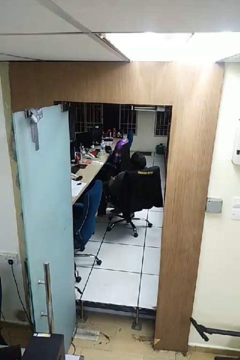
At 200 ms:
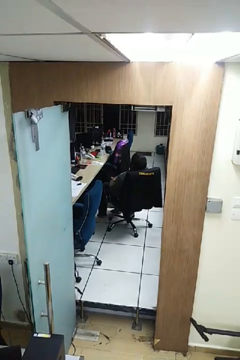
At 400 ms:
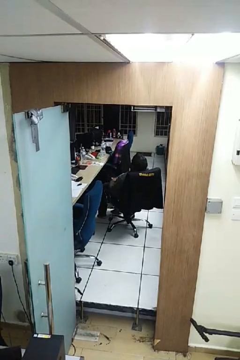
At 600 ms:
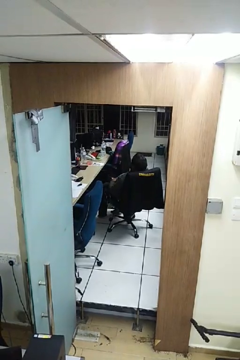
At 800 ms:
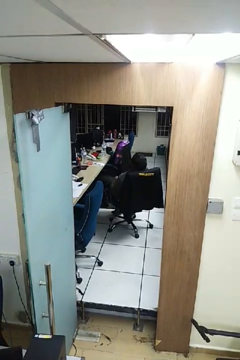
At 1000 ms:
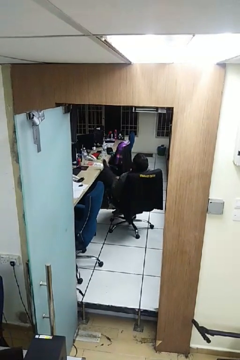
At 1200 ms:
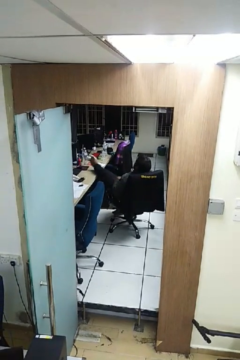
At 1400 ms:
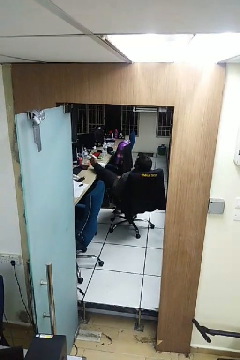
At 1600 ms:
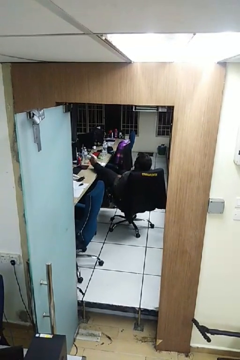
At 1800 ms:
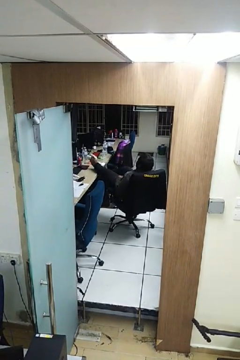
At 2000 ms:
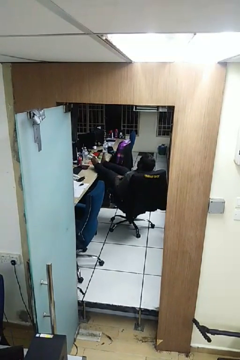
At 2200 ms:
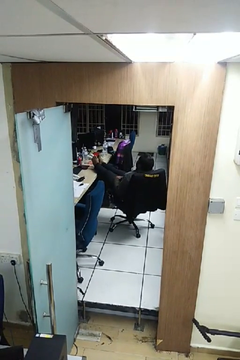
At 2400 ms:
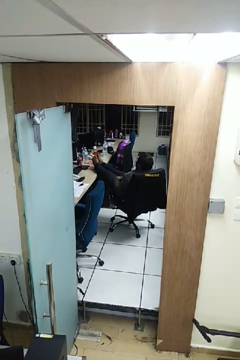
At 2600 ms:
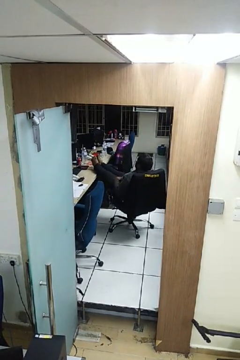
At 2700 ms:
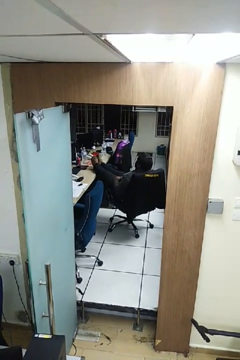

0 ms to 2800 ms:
person puts feet up

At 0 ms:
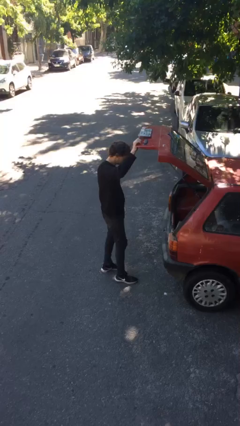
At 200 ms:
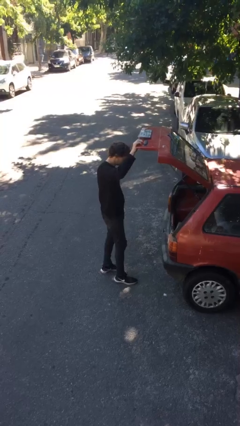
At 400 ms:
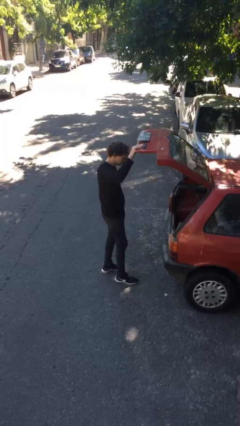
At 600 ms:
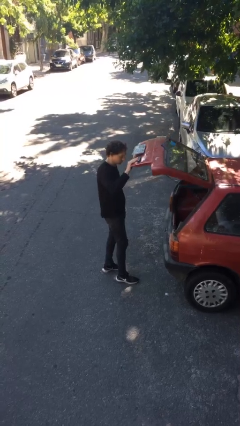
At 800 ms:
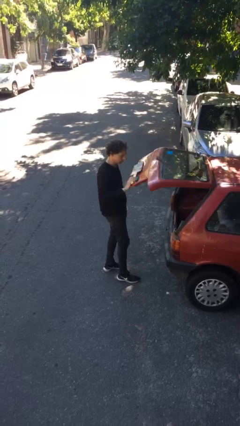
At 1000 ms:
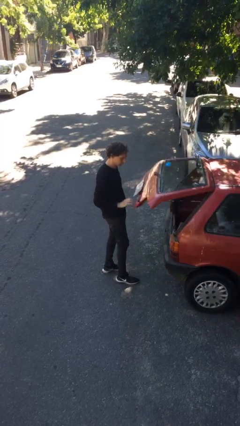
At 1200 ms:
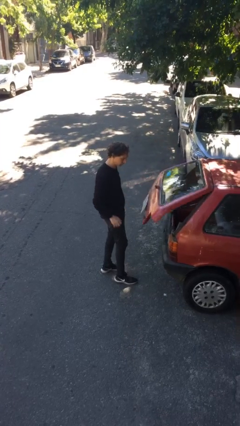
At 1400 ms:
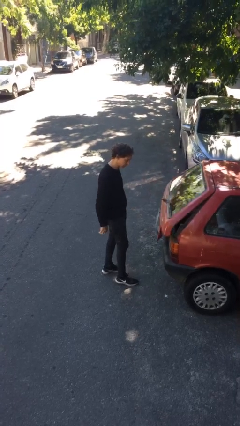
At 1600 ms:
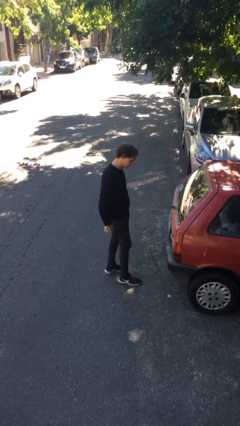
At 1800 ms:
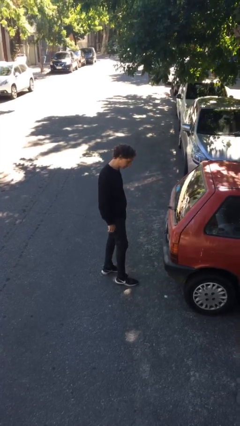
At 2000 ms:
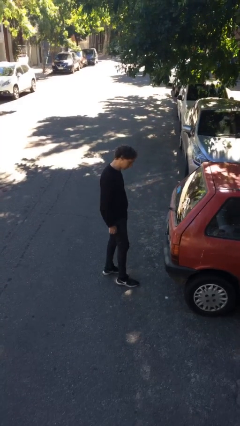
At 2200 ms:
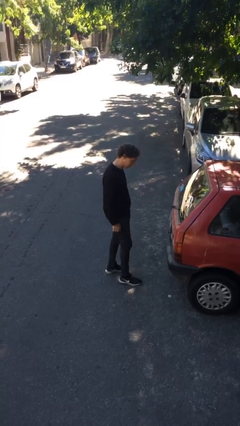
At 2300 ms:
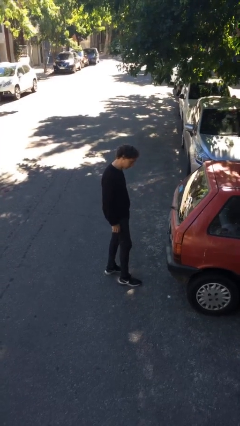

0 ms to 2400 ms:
person closes car trunk

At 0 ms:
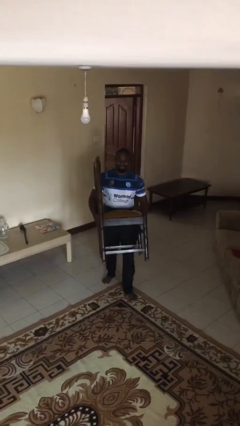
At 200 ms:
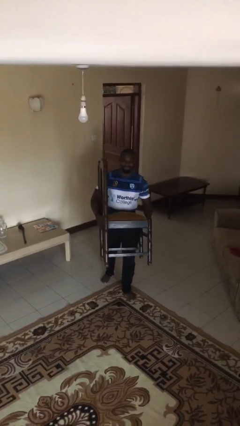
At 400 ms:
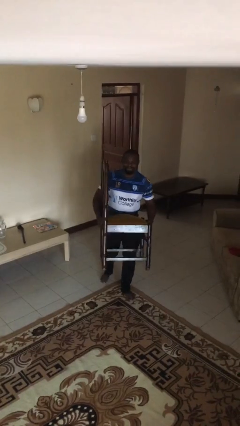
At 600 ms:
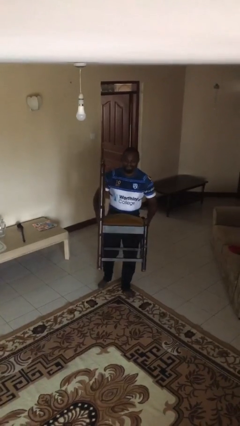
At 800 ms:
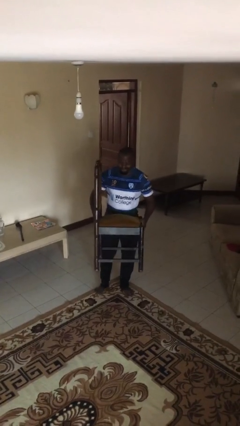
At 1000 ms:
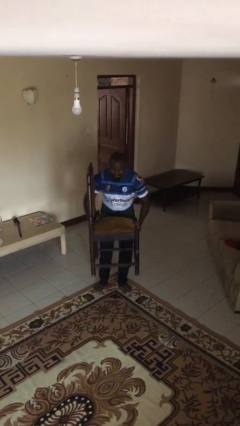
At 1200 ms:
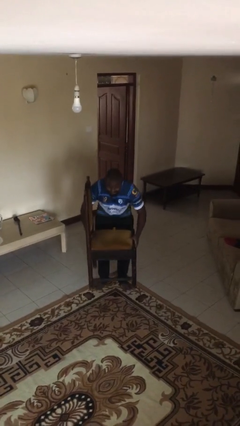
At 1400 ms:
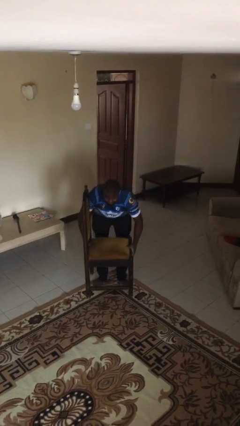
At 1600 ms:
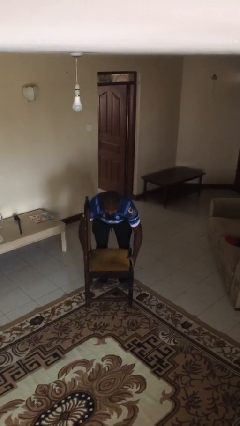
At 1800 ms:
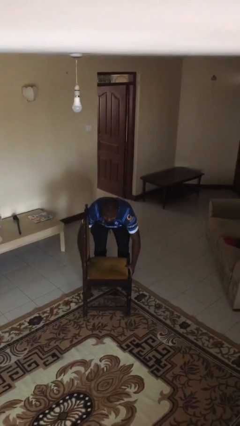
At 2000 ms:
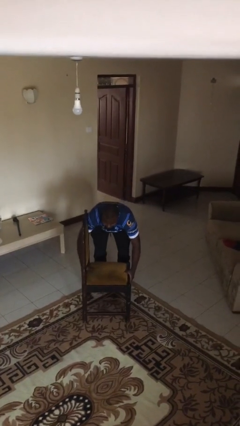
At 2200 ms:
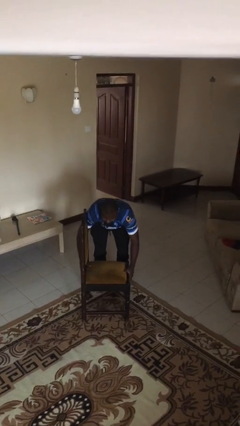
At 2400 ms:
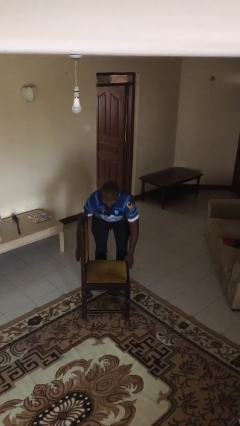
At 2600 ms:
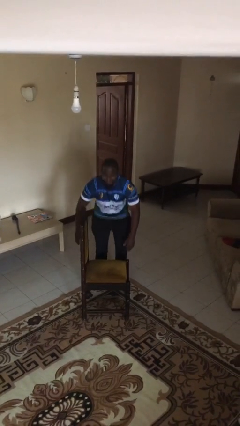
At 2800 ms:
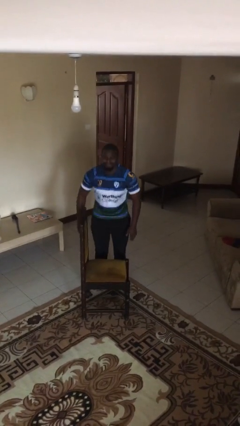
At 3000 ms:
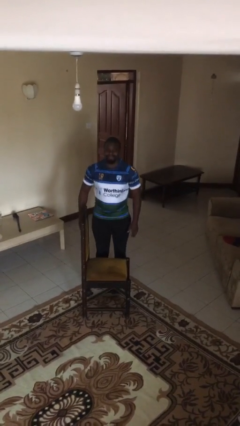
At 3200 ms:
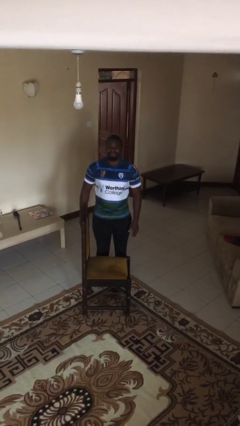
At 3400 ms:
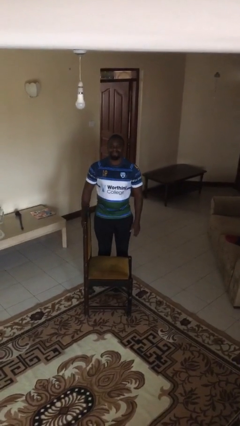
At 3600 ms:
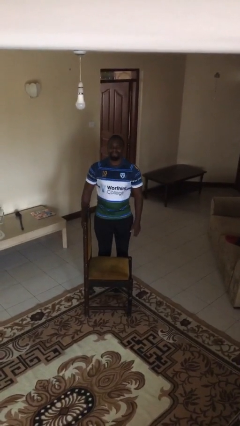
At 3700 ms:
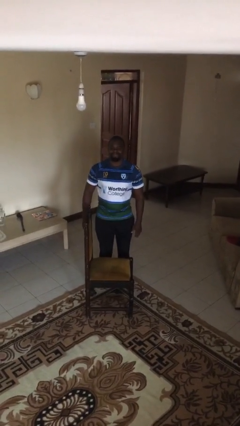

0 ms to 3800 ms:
person puts down object on floor

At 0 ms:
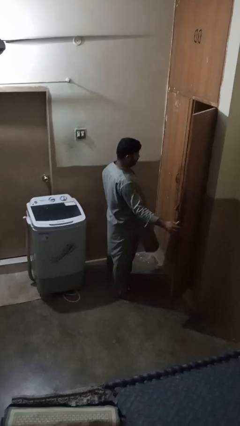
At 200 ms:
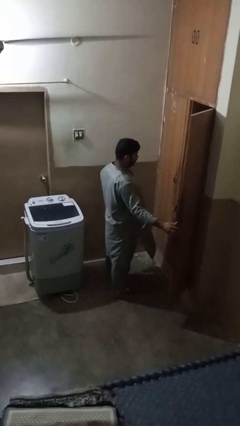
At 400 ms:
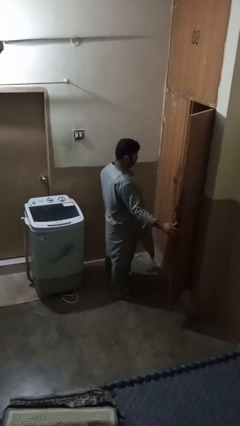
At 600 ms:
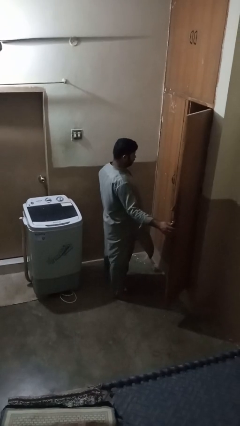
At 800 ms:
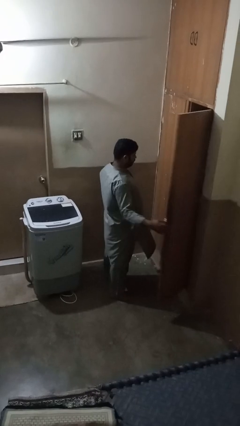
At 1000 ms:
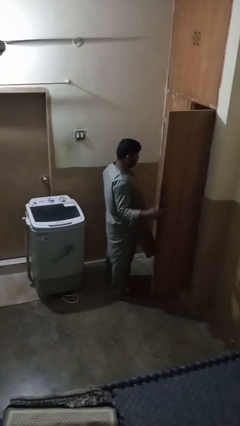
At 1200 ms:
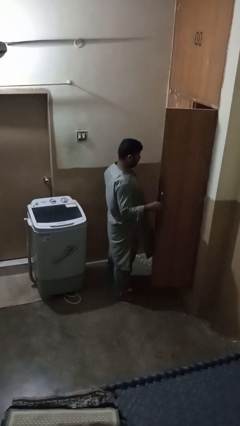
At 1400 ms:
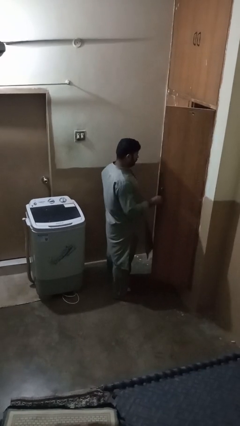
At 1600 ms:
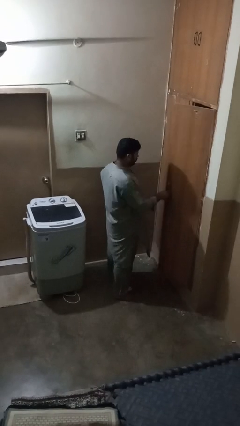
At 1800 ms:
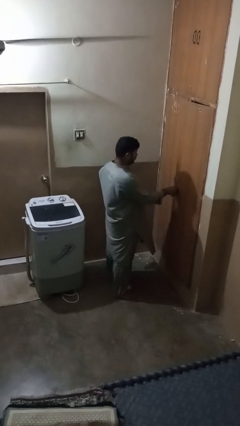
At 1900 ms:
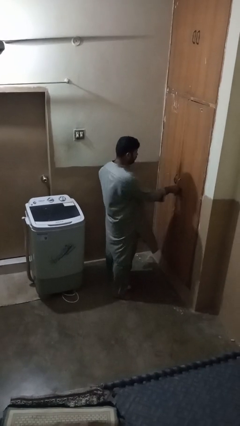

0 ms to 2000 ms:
person closes closet door

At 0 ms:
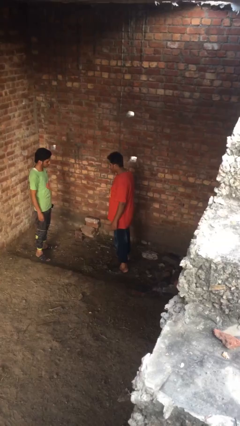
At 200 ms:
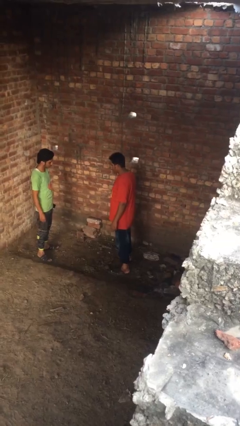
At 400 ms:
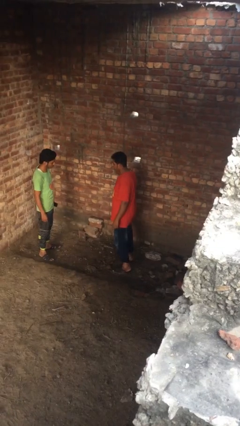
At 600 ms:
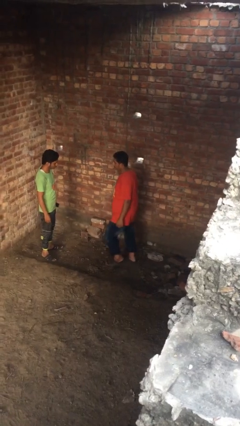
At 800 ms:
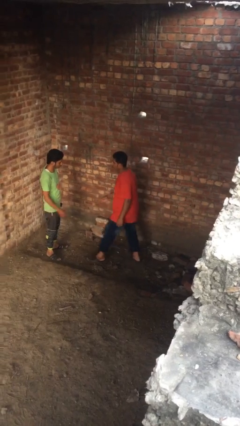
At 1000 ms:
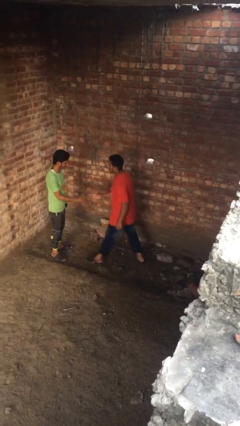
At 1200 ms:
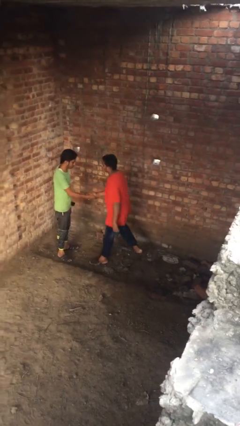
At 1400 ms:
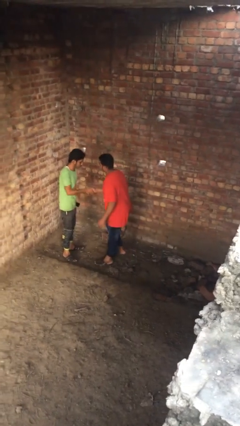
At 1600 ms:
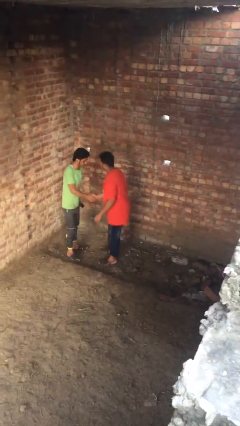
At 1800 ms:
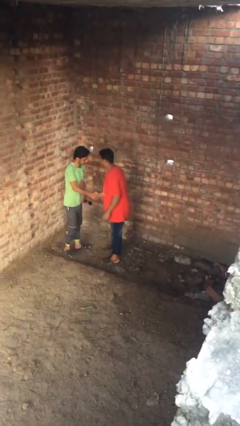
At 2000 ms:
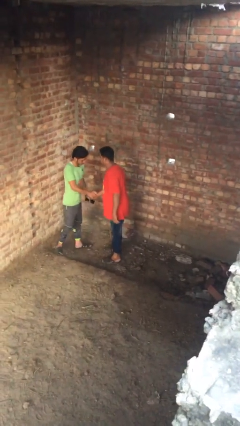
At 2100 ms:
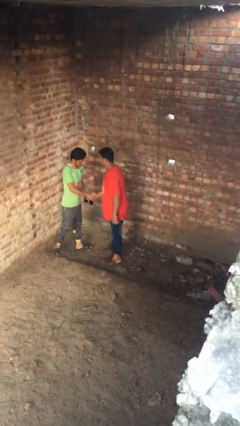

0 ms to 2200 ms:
person shakes hand

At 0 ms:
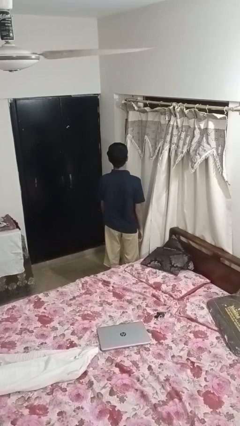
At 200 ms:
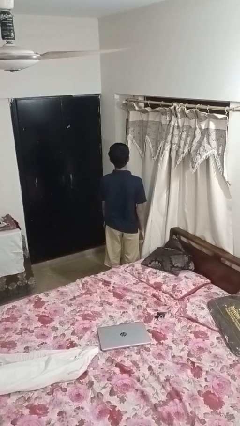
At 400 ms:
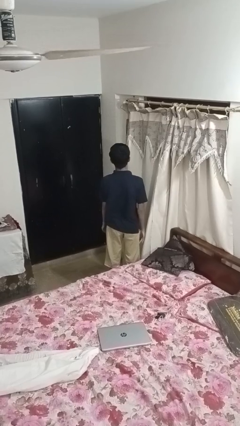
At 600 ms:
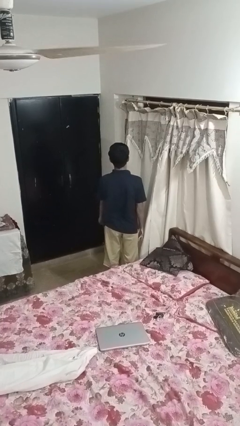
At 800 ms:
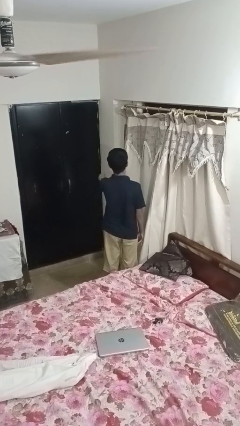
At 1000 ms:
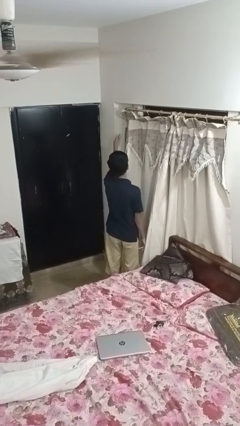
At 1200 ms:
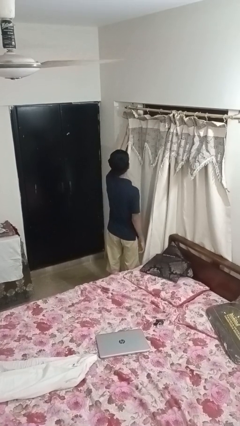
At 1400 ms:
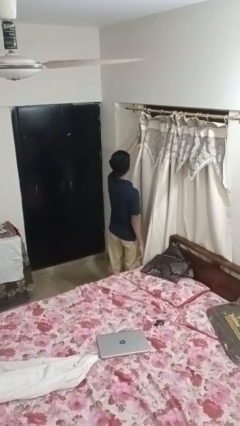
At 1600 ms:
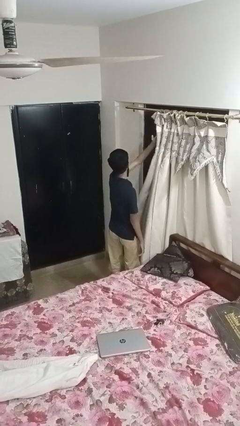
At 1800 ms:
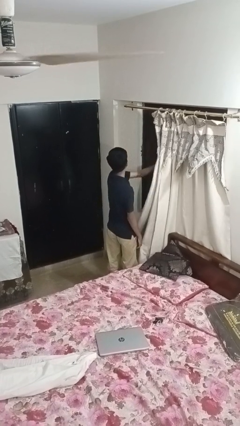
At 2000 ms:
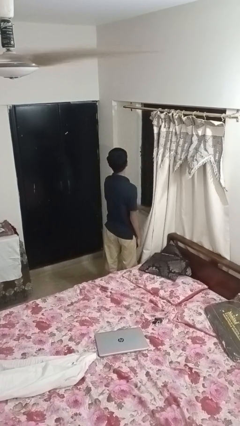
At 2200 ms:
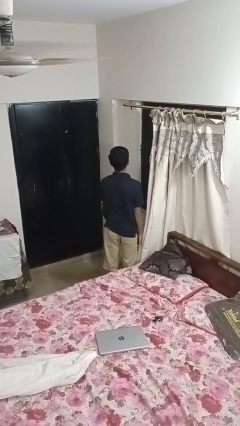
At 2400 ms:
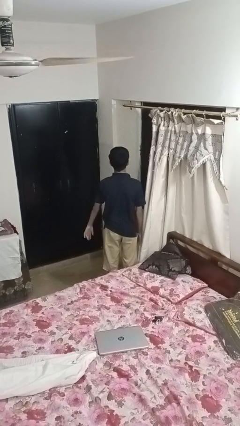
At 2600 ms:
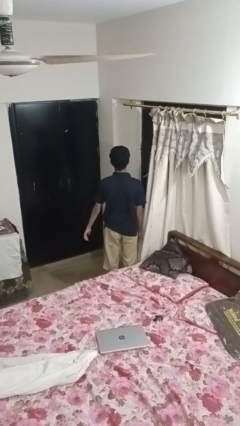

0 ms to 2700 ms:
person opens curtains

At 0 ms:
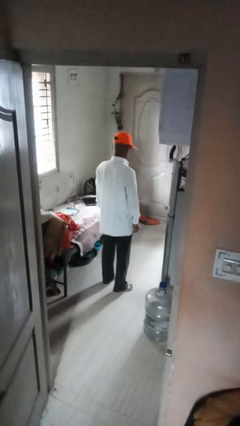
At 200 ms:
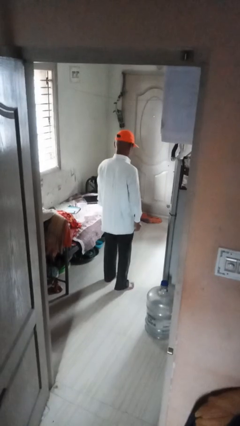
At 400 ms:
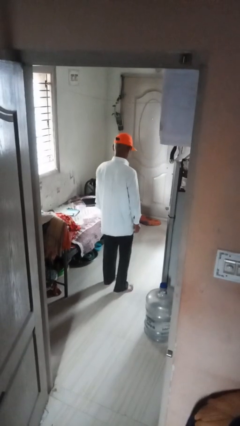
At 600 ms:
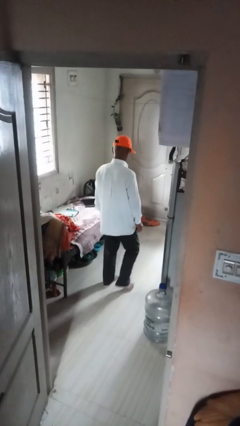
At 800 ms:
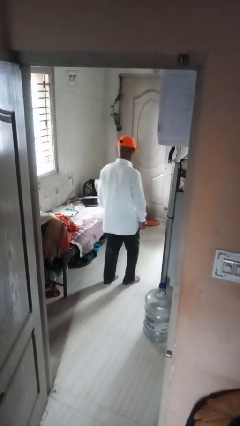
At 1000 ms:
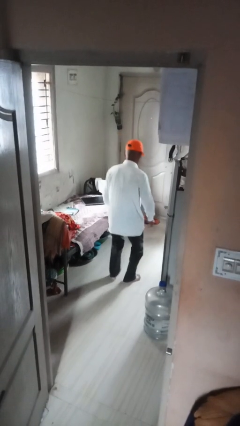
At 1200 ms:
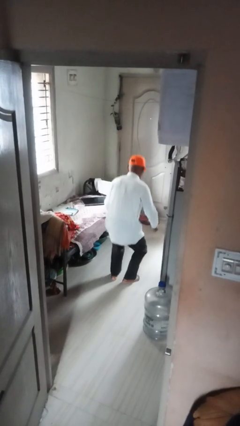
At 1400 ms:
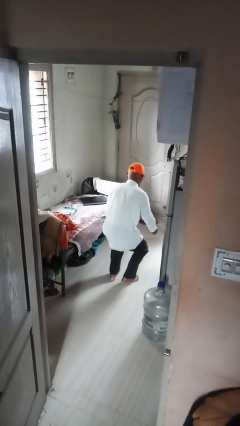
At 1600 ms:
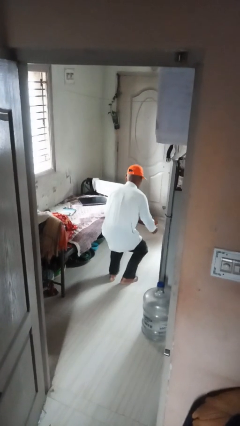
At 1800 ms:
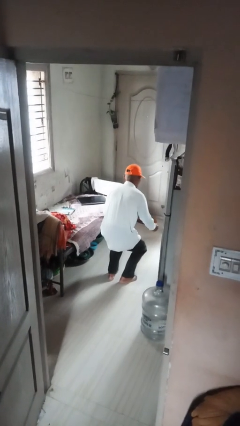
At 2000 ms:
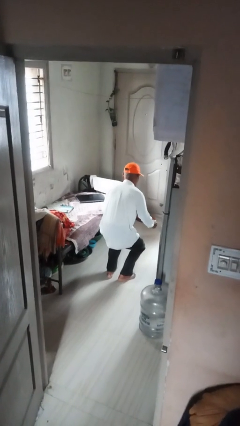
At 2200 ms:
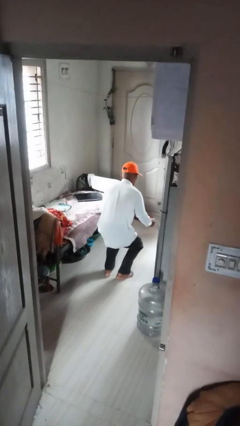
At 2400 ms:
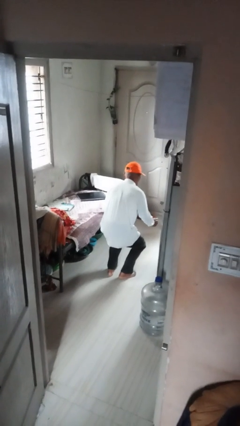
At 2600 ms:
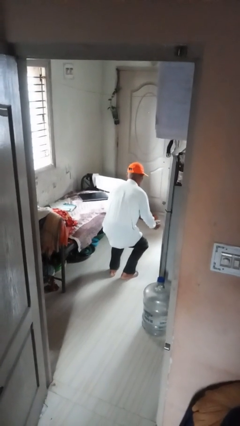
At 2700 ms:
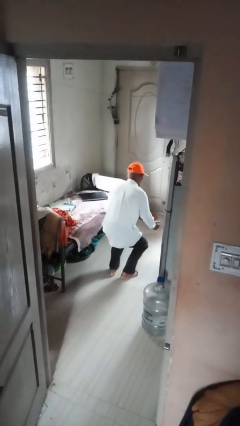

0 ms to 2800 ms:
person squats
